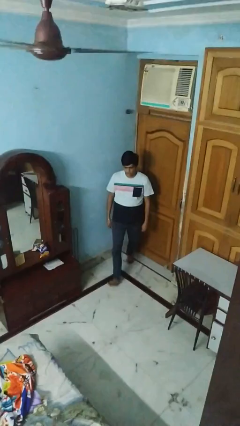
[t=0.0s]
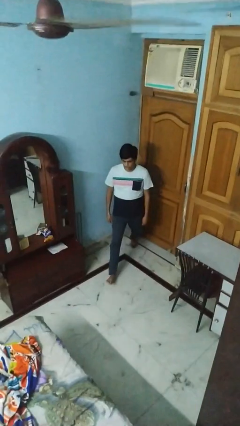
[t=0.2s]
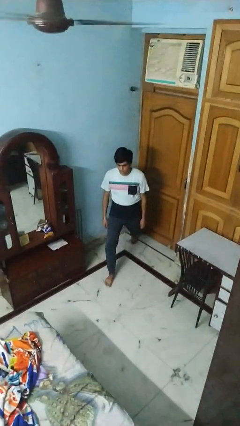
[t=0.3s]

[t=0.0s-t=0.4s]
person exercises with lunges

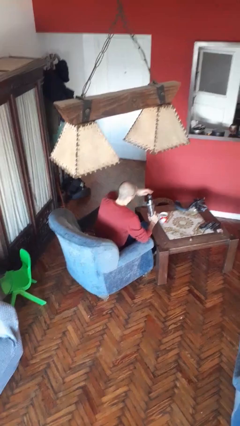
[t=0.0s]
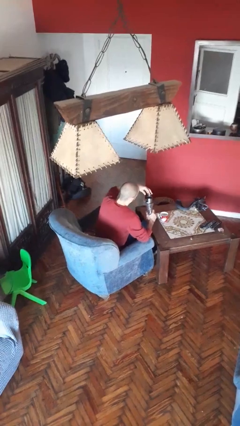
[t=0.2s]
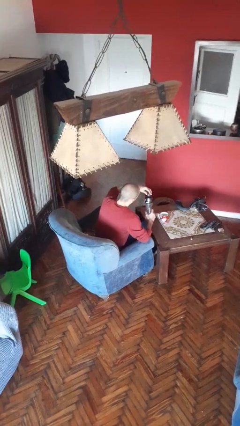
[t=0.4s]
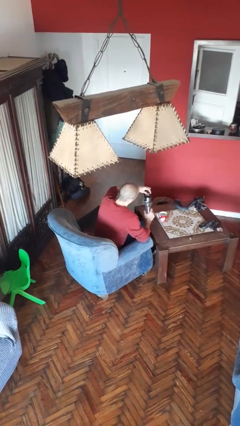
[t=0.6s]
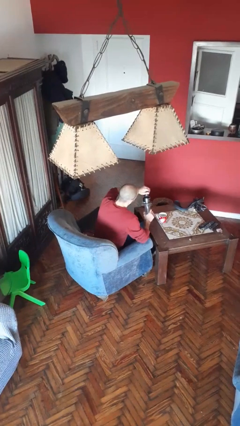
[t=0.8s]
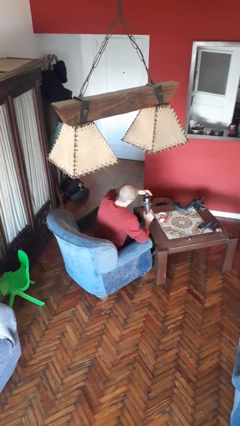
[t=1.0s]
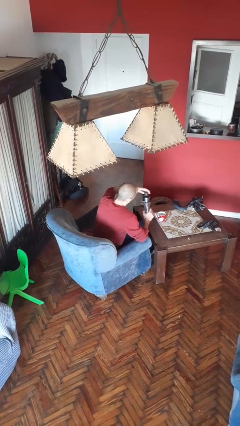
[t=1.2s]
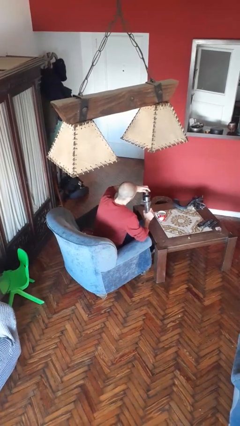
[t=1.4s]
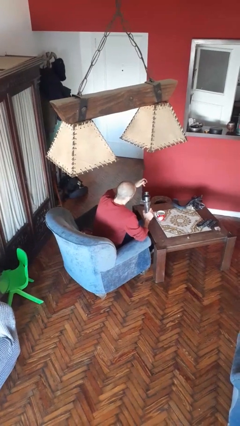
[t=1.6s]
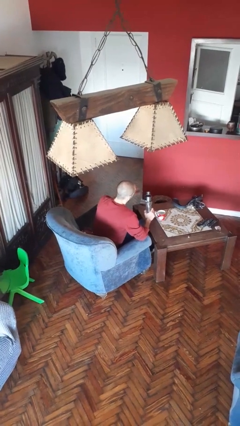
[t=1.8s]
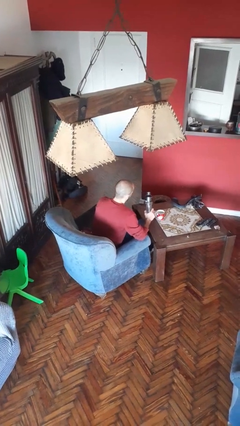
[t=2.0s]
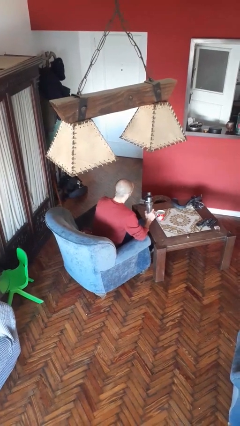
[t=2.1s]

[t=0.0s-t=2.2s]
person unscrews lid from bottle

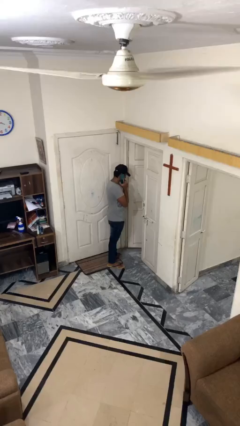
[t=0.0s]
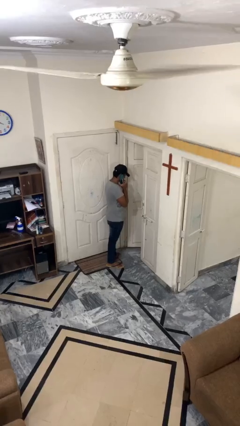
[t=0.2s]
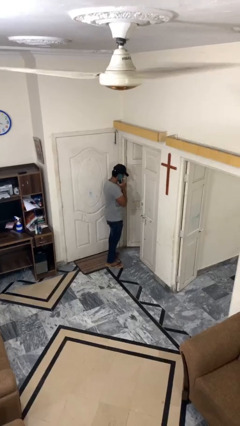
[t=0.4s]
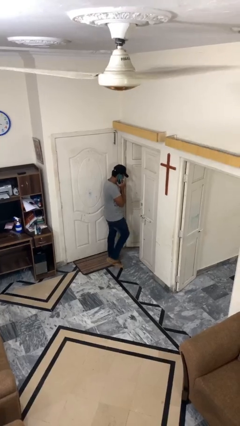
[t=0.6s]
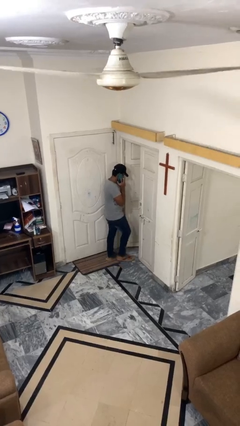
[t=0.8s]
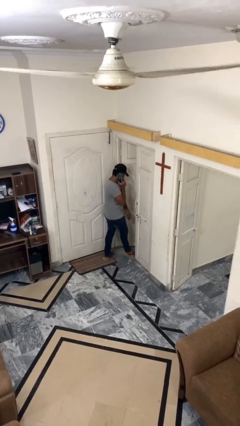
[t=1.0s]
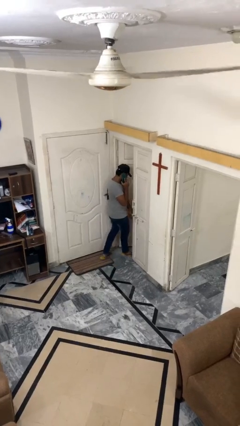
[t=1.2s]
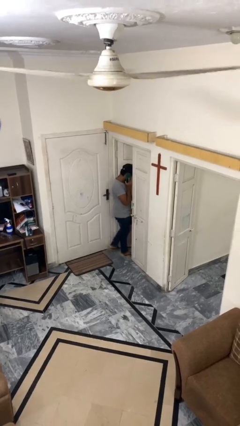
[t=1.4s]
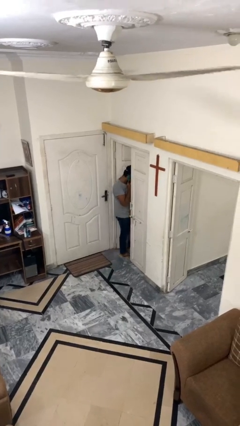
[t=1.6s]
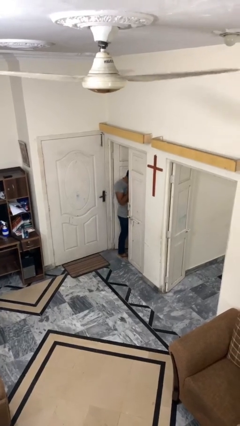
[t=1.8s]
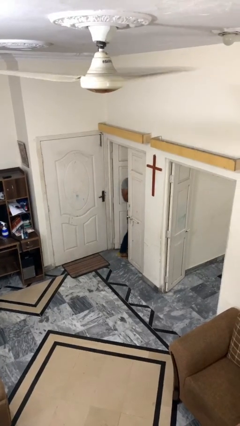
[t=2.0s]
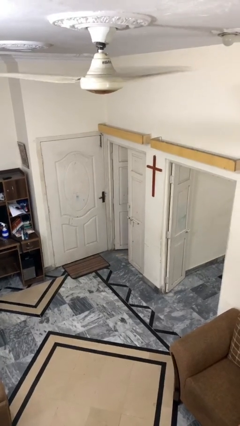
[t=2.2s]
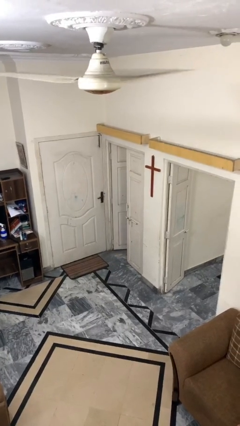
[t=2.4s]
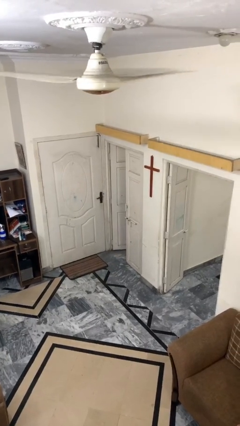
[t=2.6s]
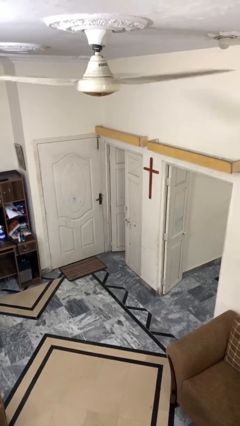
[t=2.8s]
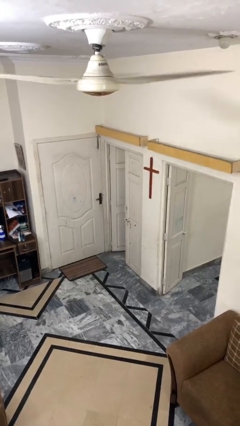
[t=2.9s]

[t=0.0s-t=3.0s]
person exits scene through structure

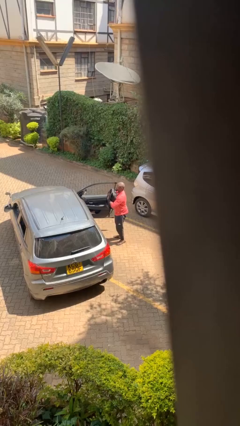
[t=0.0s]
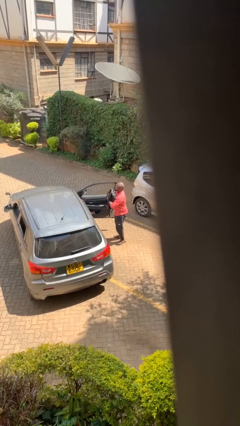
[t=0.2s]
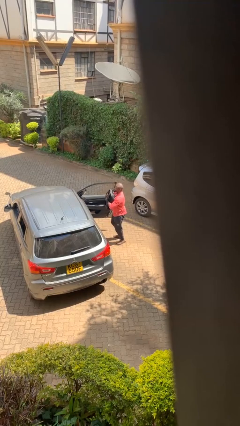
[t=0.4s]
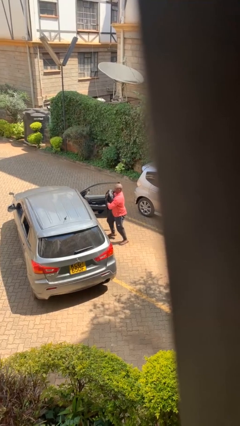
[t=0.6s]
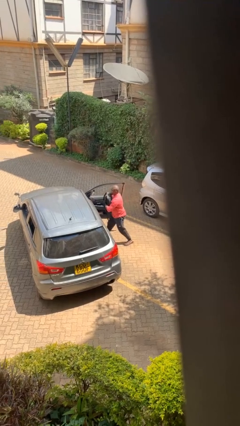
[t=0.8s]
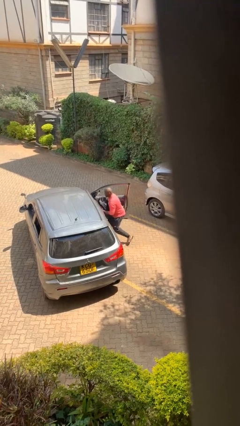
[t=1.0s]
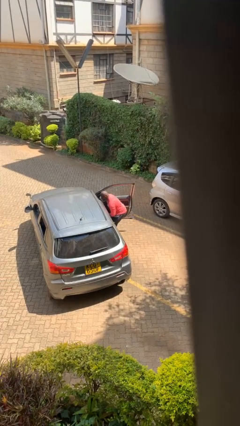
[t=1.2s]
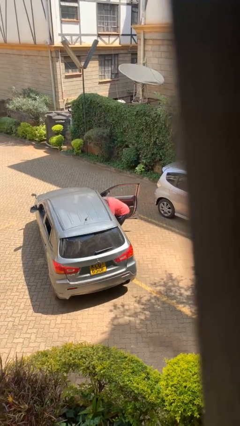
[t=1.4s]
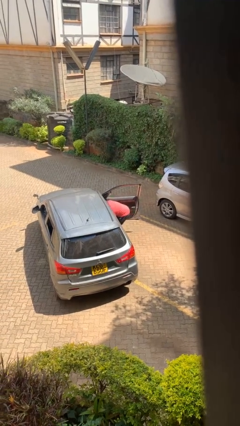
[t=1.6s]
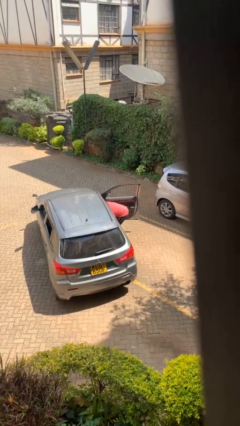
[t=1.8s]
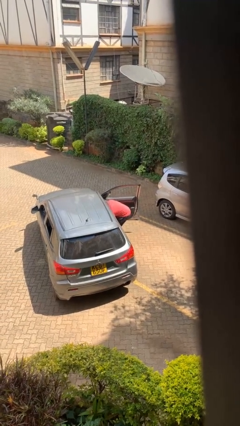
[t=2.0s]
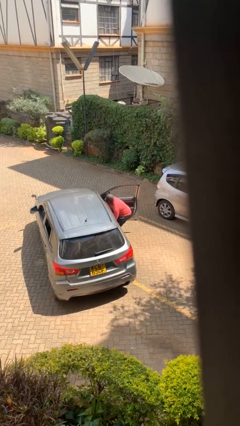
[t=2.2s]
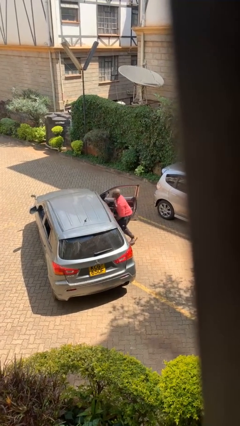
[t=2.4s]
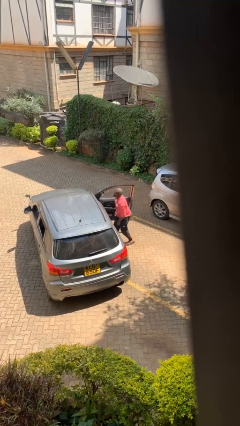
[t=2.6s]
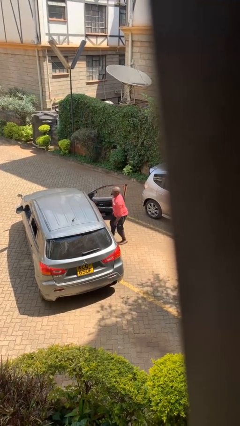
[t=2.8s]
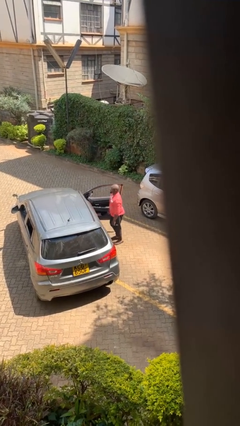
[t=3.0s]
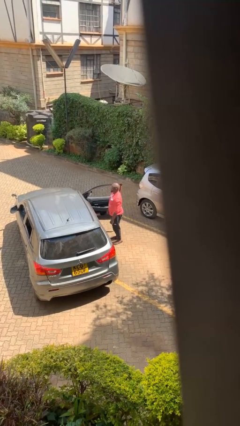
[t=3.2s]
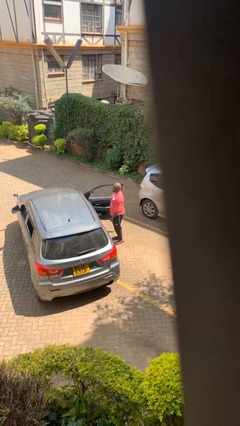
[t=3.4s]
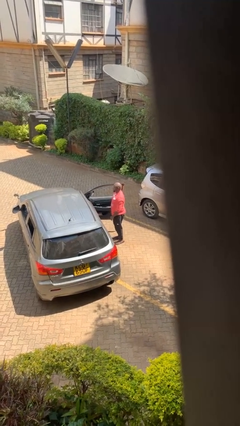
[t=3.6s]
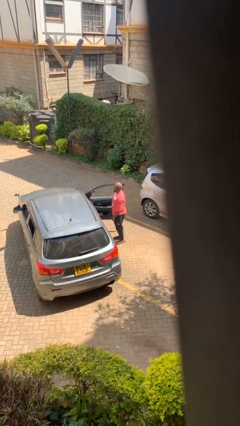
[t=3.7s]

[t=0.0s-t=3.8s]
person loads car

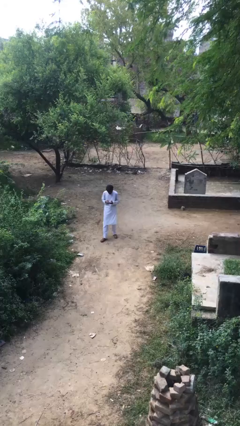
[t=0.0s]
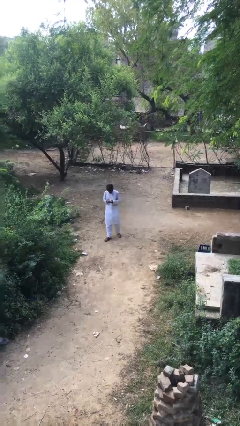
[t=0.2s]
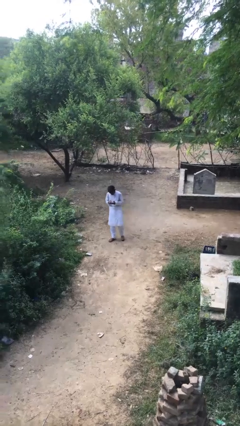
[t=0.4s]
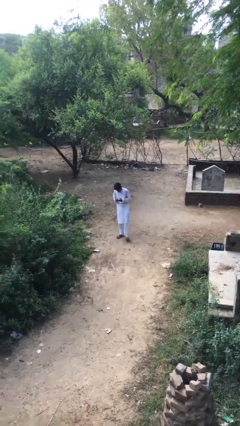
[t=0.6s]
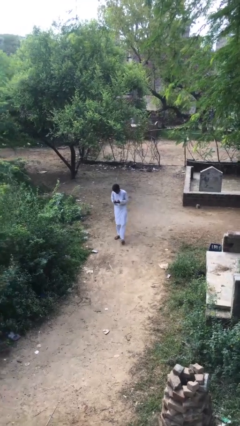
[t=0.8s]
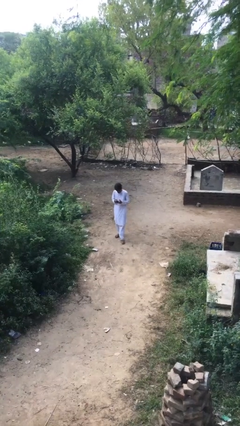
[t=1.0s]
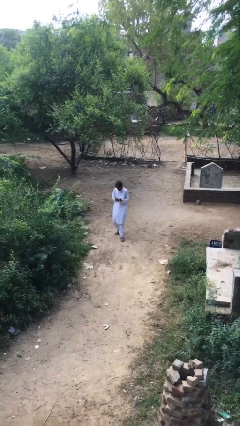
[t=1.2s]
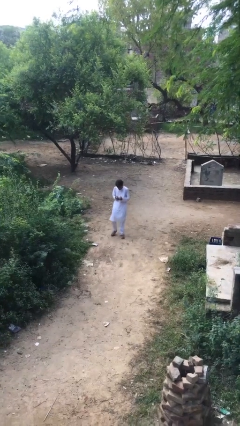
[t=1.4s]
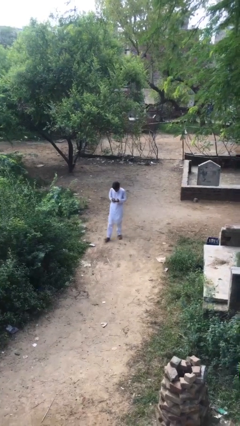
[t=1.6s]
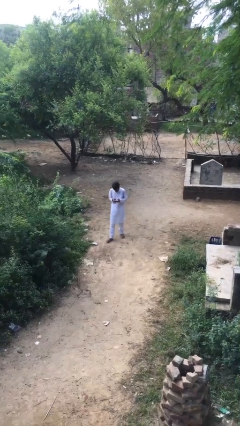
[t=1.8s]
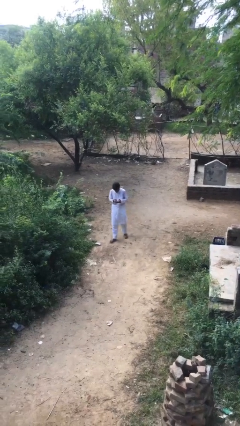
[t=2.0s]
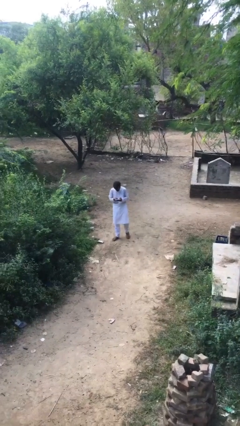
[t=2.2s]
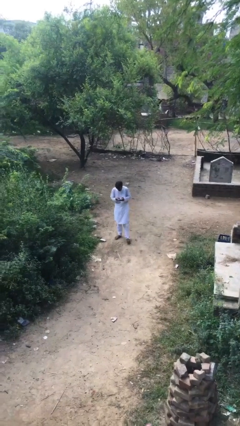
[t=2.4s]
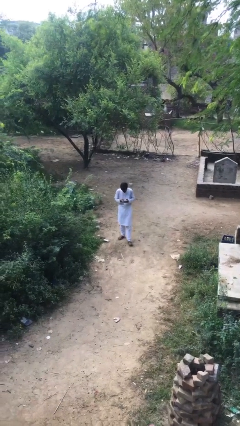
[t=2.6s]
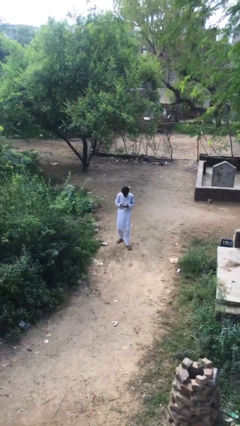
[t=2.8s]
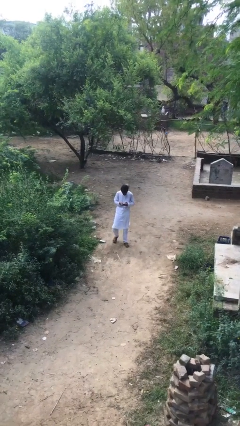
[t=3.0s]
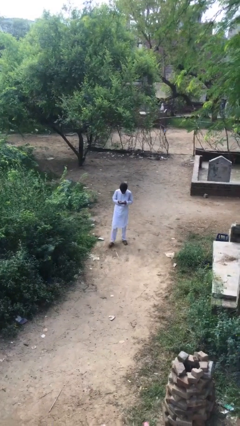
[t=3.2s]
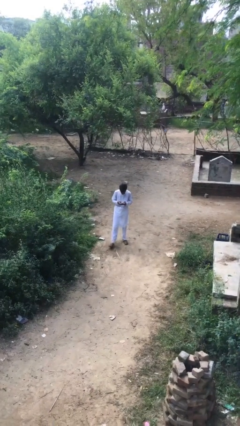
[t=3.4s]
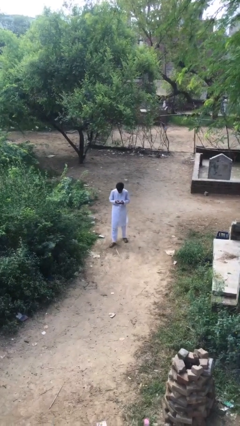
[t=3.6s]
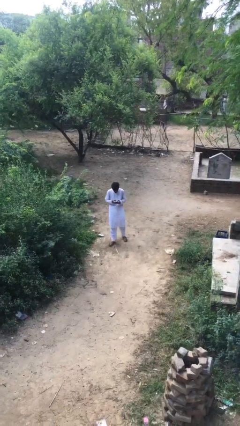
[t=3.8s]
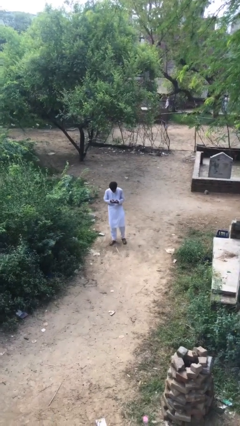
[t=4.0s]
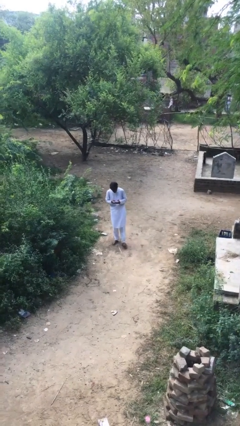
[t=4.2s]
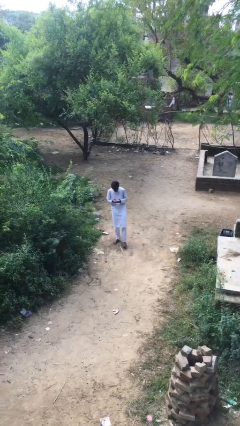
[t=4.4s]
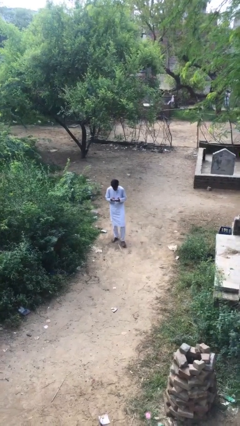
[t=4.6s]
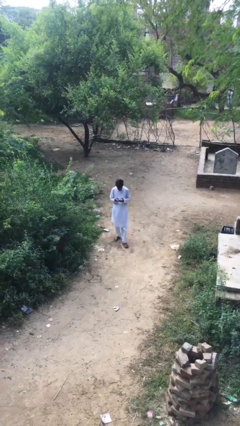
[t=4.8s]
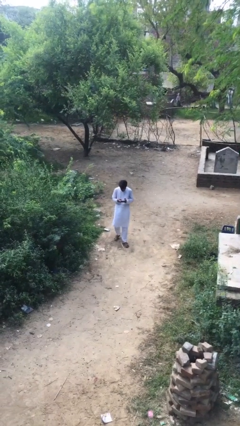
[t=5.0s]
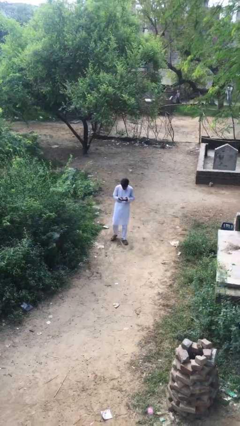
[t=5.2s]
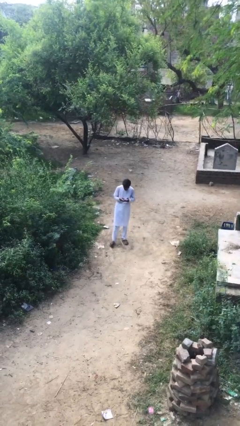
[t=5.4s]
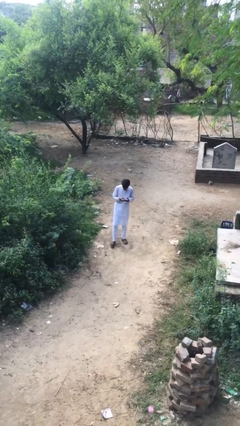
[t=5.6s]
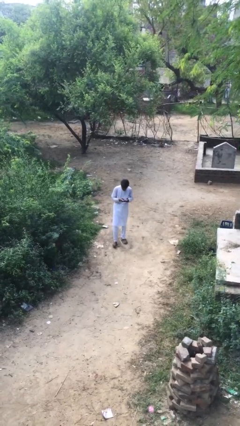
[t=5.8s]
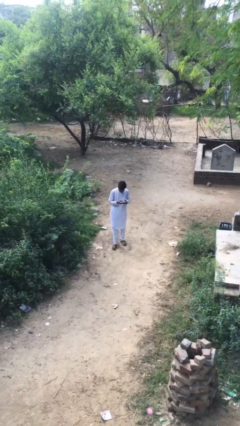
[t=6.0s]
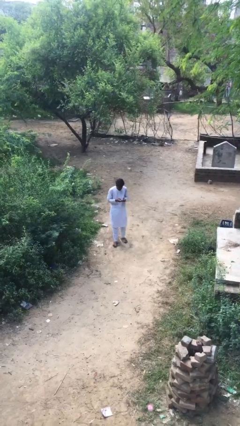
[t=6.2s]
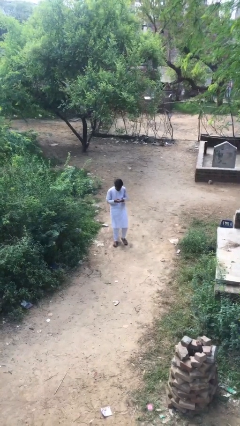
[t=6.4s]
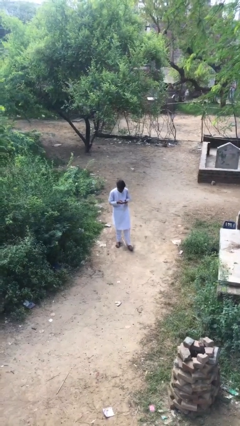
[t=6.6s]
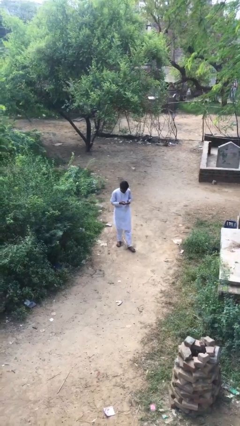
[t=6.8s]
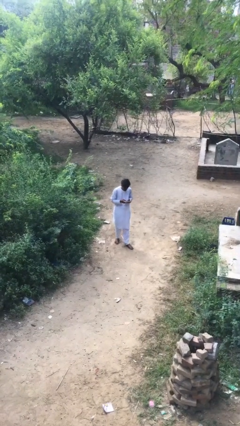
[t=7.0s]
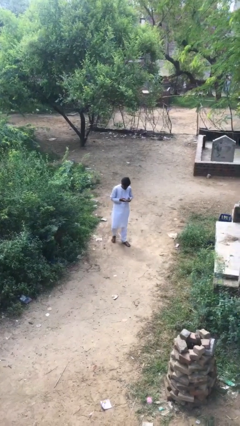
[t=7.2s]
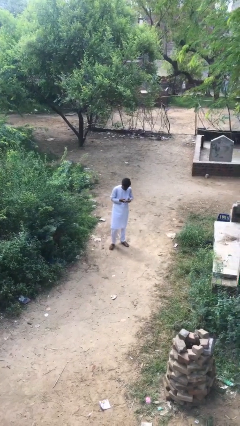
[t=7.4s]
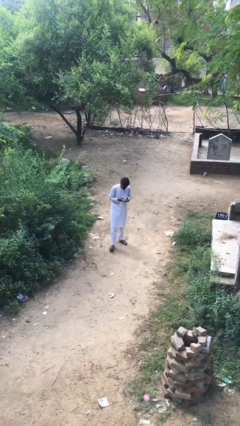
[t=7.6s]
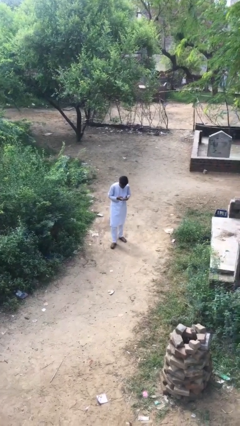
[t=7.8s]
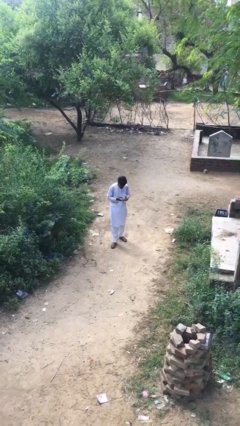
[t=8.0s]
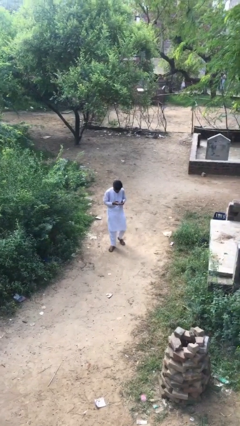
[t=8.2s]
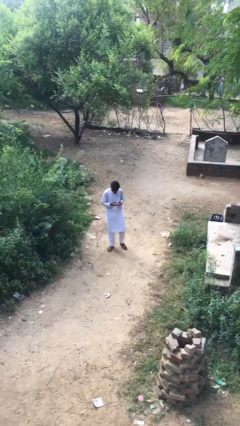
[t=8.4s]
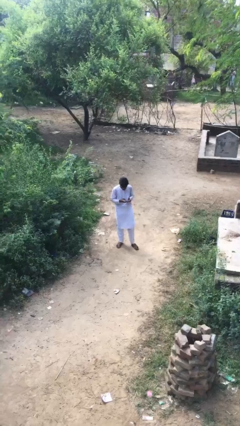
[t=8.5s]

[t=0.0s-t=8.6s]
person texts on phone
